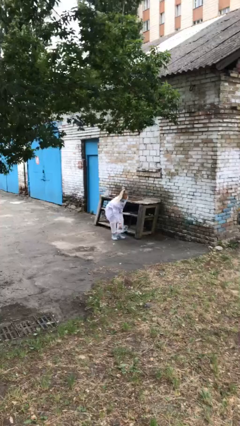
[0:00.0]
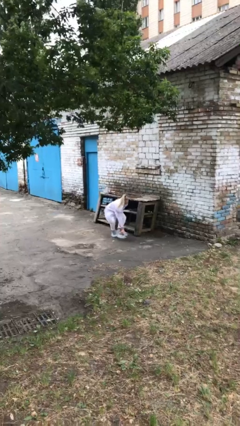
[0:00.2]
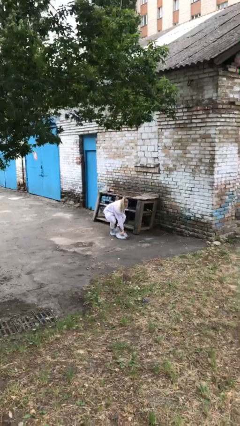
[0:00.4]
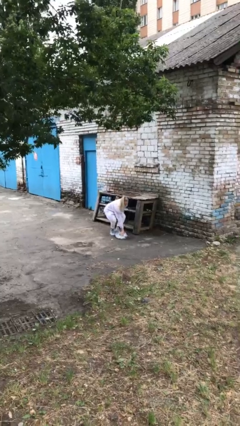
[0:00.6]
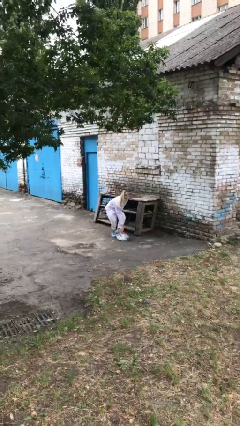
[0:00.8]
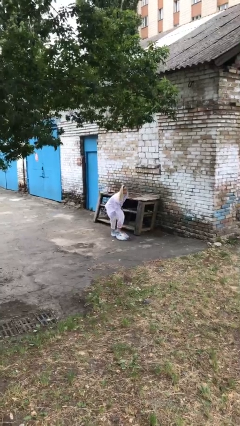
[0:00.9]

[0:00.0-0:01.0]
person puts down object on floor

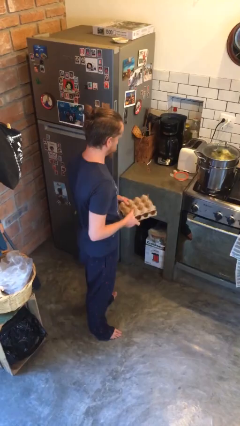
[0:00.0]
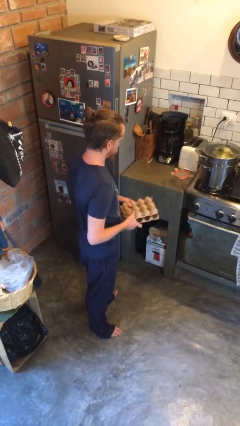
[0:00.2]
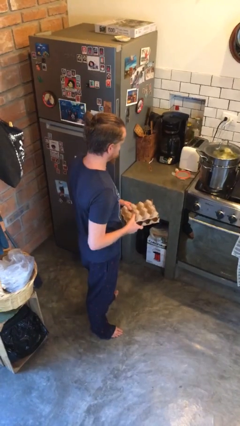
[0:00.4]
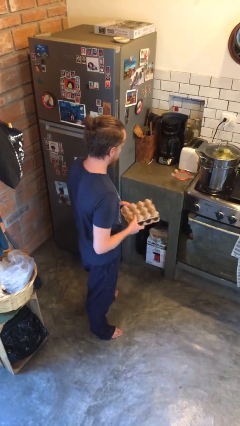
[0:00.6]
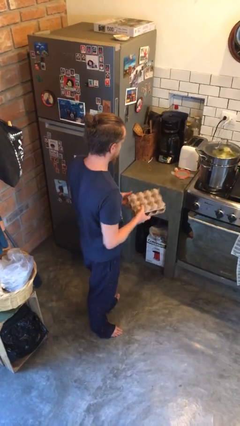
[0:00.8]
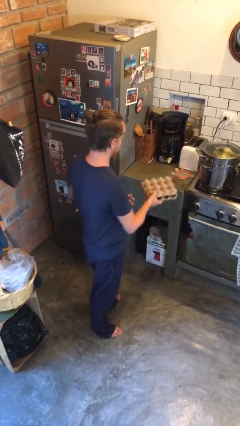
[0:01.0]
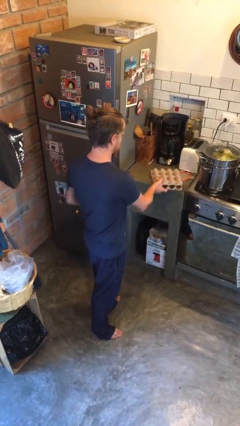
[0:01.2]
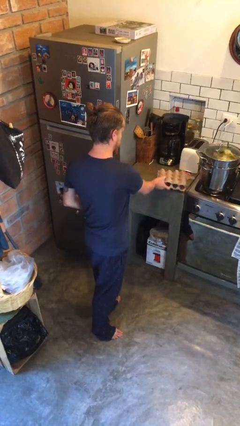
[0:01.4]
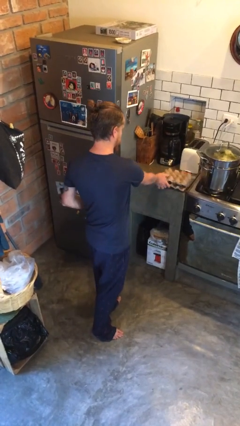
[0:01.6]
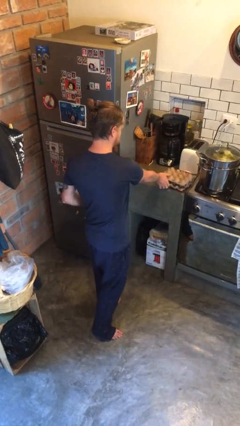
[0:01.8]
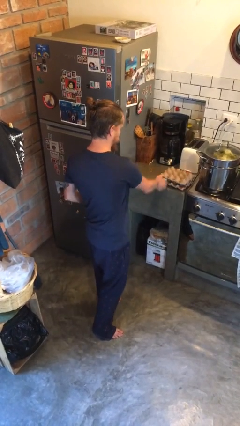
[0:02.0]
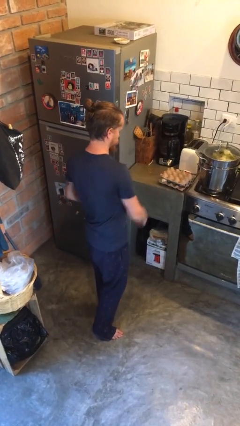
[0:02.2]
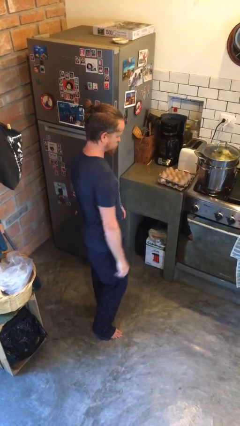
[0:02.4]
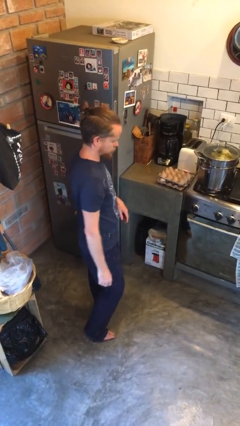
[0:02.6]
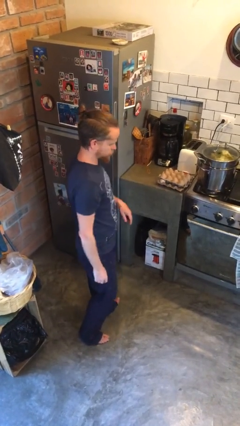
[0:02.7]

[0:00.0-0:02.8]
person puts down object on countertop

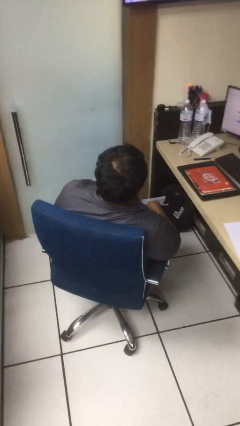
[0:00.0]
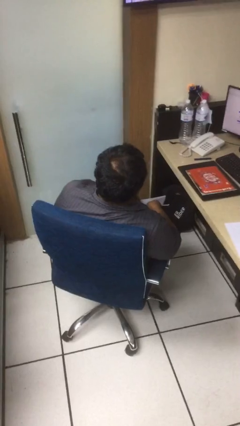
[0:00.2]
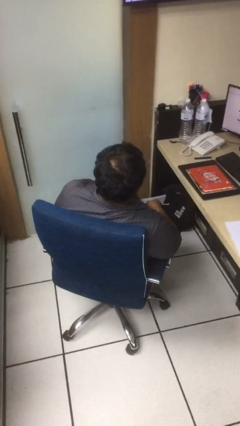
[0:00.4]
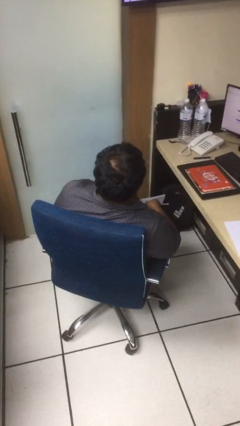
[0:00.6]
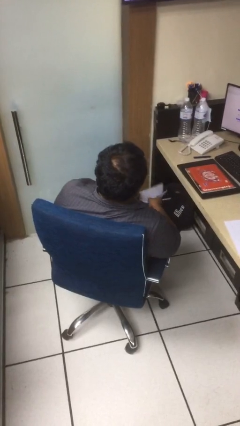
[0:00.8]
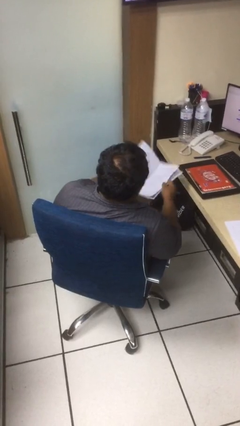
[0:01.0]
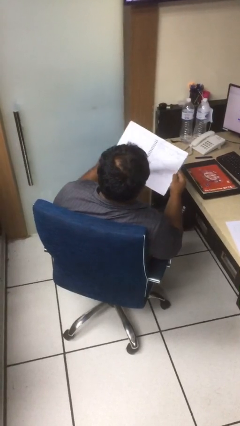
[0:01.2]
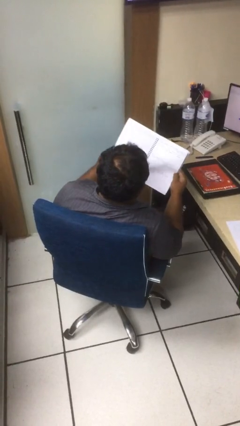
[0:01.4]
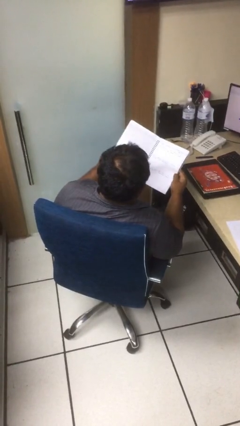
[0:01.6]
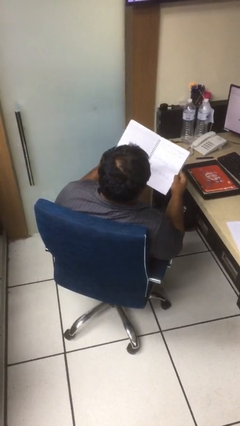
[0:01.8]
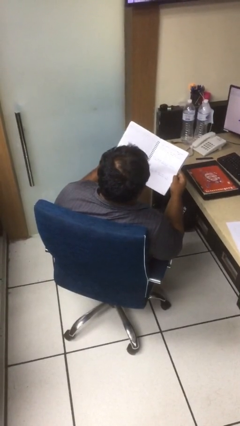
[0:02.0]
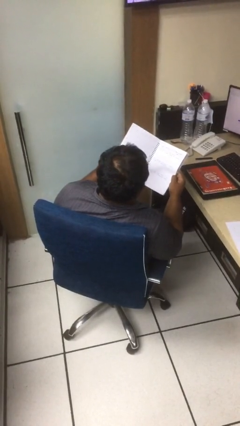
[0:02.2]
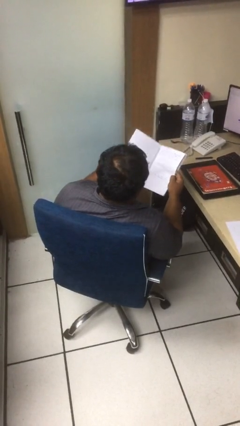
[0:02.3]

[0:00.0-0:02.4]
person reads book

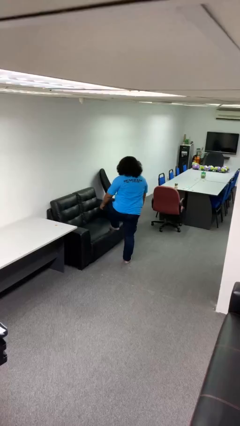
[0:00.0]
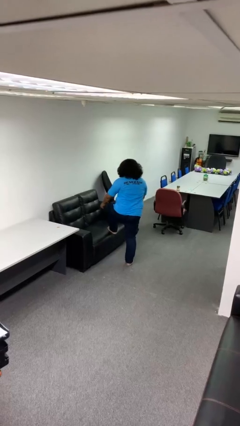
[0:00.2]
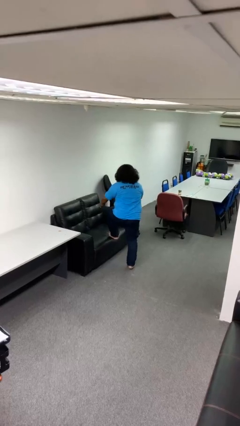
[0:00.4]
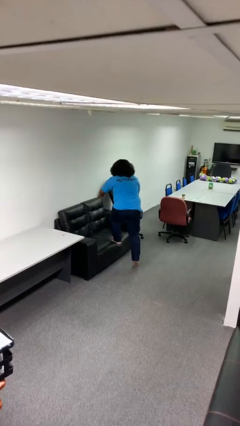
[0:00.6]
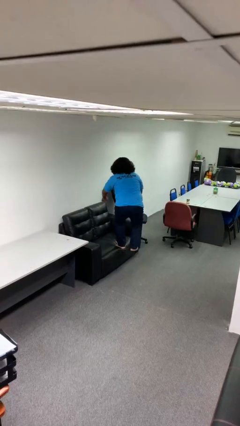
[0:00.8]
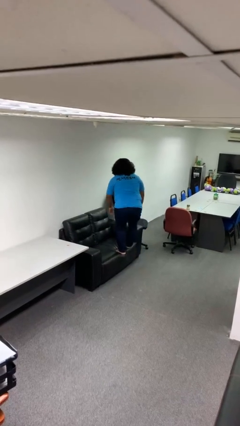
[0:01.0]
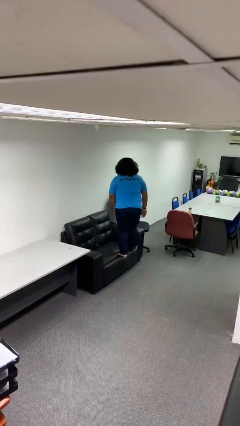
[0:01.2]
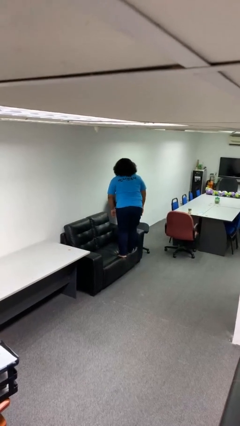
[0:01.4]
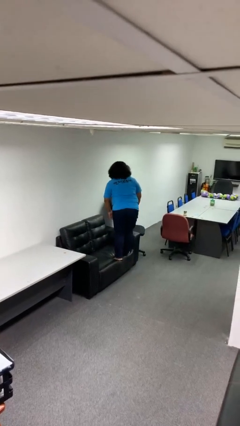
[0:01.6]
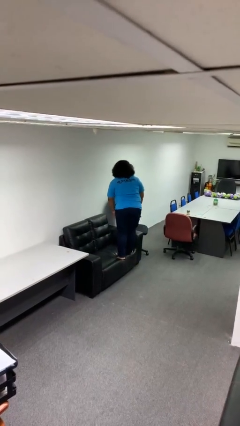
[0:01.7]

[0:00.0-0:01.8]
person climbs on couch

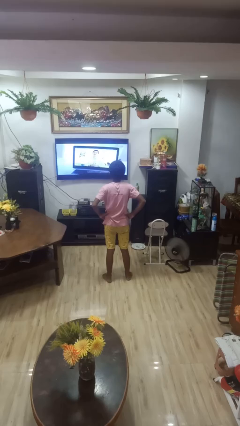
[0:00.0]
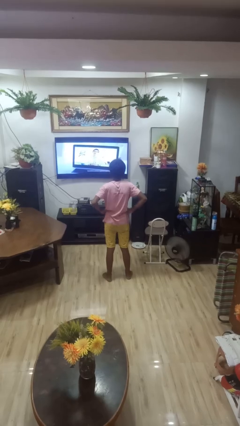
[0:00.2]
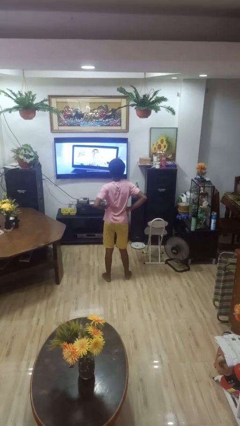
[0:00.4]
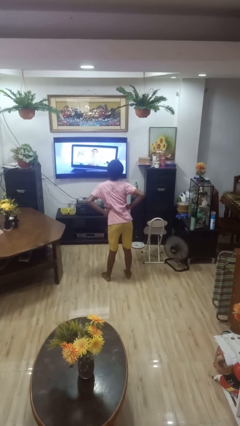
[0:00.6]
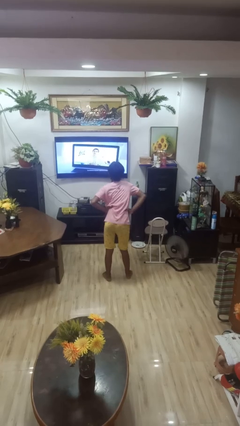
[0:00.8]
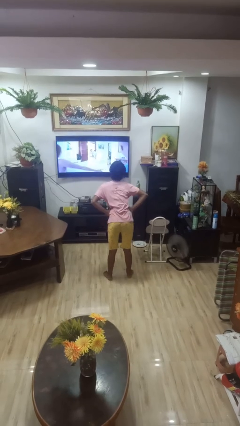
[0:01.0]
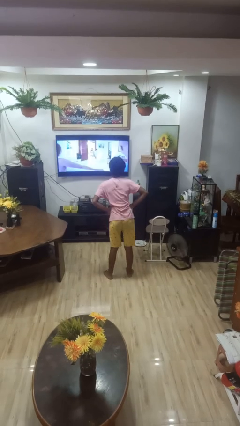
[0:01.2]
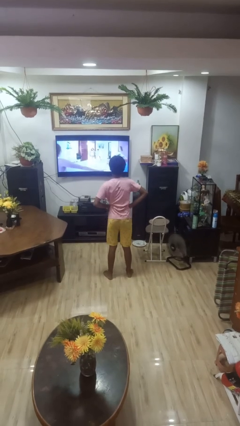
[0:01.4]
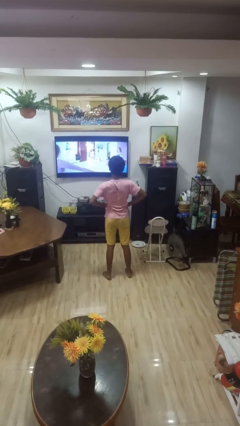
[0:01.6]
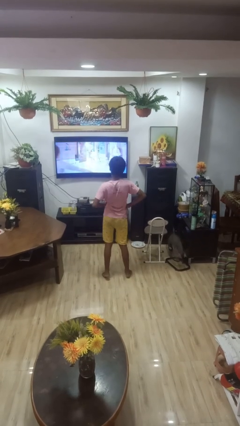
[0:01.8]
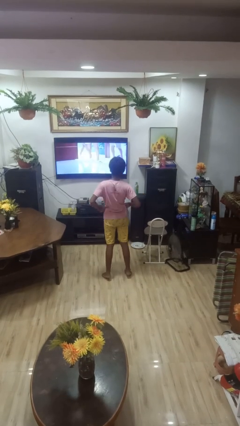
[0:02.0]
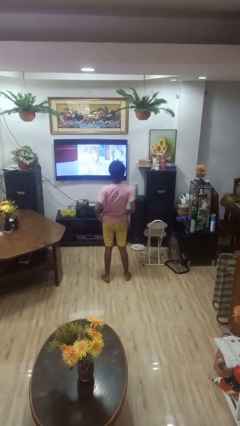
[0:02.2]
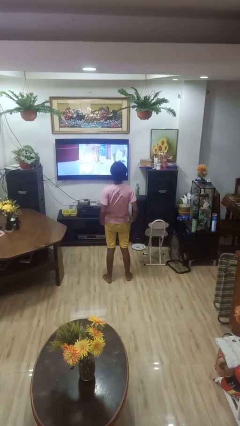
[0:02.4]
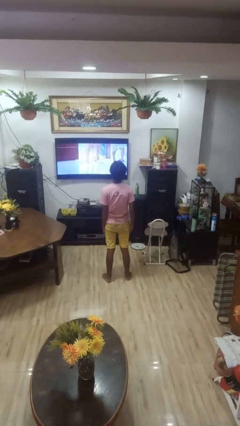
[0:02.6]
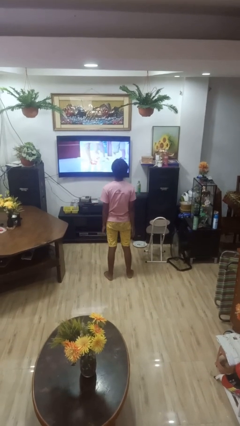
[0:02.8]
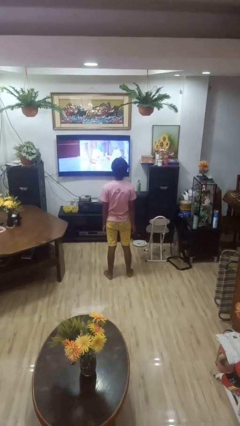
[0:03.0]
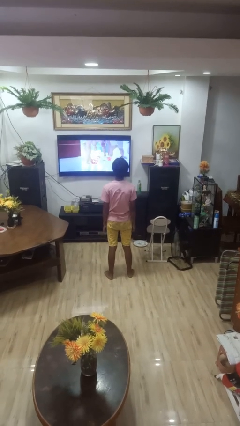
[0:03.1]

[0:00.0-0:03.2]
person wiggles hips

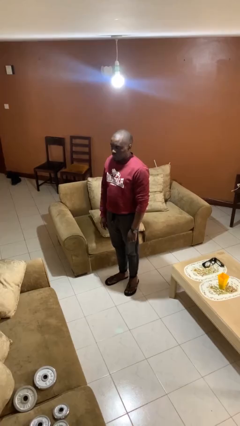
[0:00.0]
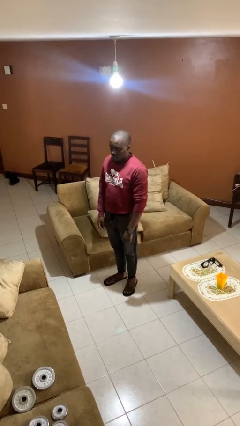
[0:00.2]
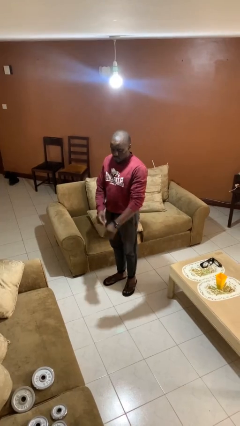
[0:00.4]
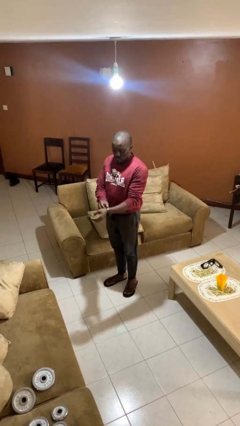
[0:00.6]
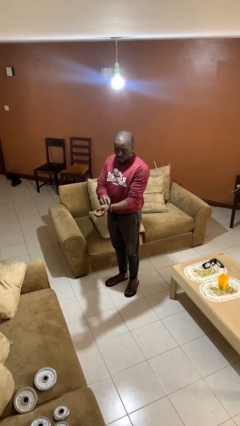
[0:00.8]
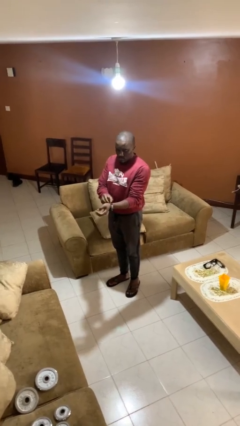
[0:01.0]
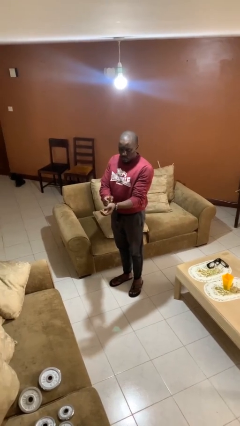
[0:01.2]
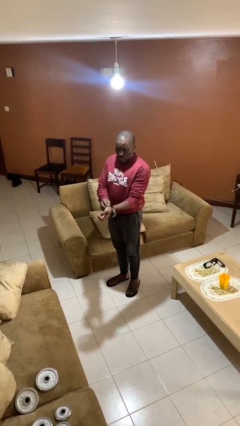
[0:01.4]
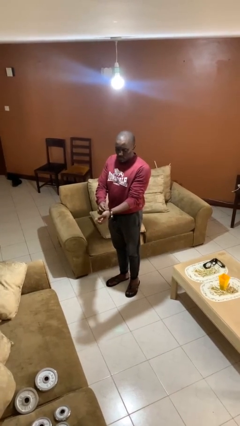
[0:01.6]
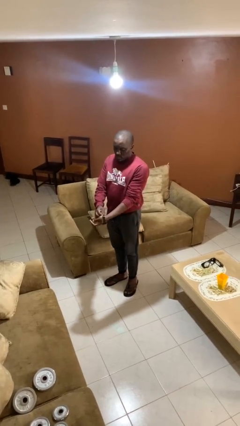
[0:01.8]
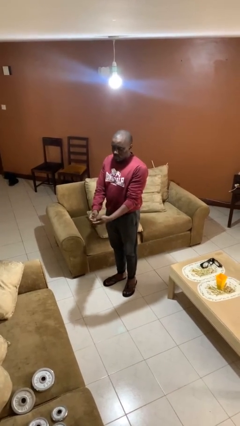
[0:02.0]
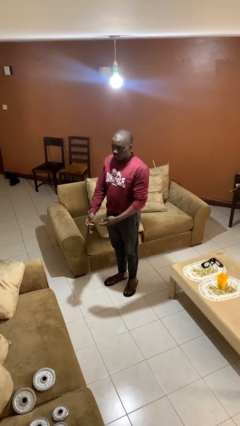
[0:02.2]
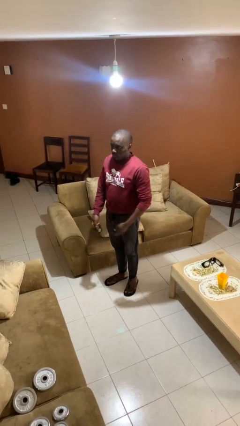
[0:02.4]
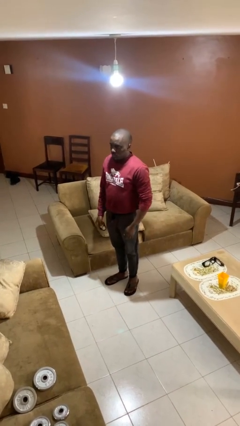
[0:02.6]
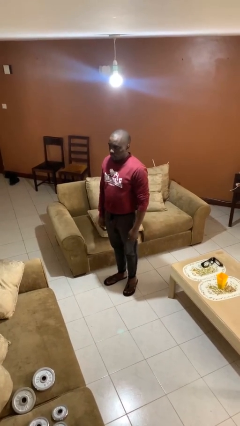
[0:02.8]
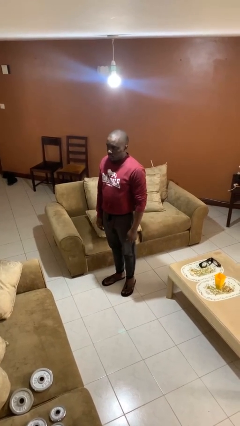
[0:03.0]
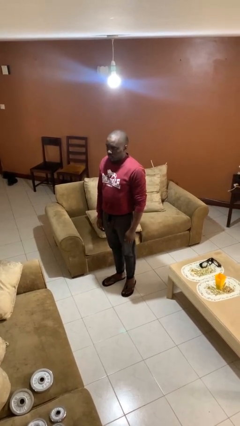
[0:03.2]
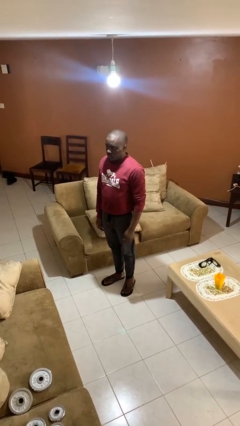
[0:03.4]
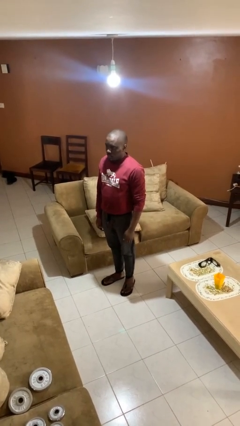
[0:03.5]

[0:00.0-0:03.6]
person takes off wristwatch

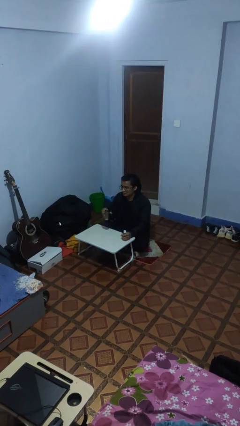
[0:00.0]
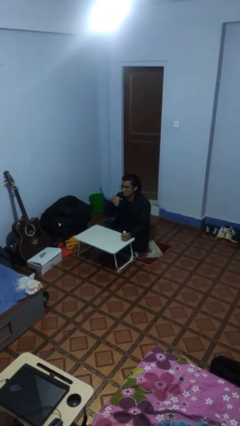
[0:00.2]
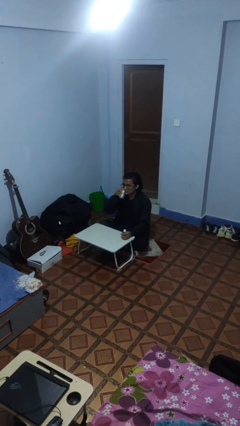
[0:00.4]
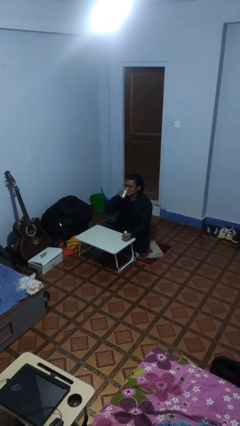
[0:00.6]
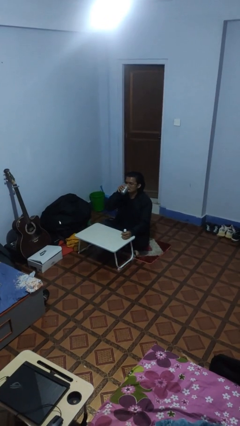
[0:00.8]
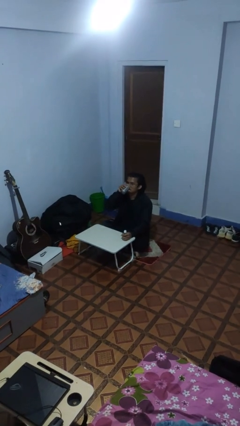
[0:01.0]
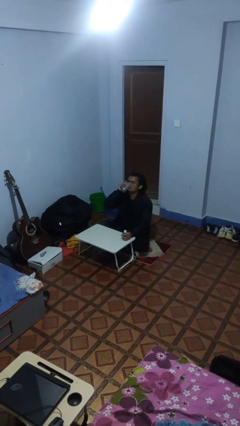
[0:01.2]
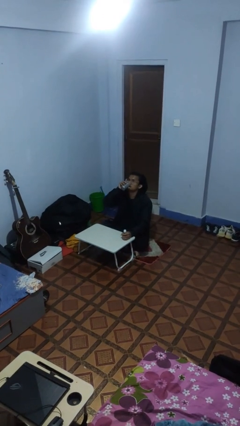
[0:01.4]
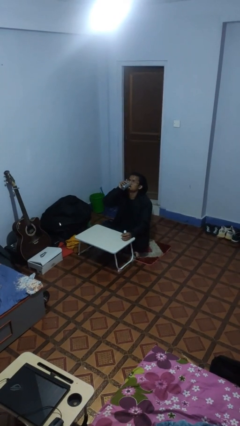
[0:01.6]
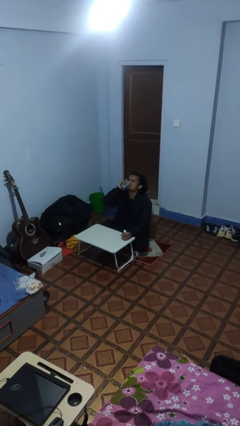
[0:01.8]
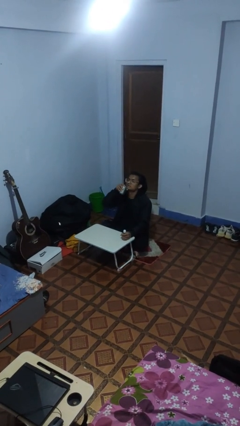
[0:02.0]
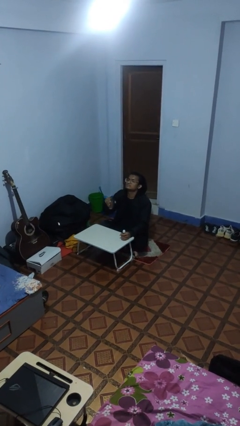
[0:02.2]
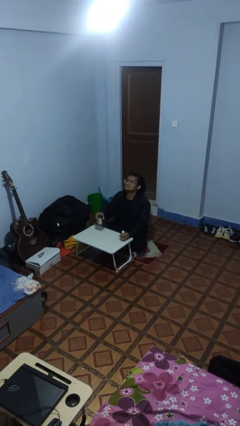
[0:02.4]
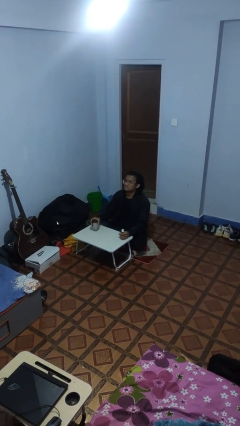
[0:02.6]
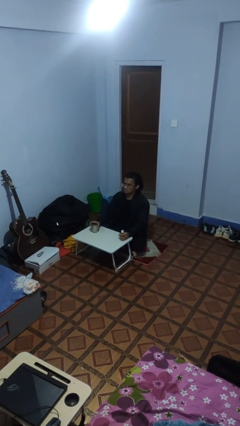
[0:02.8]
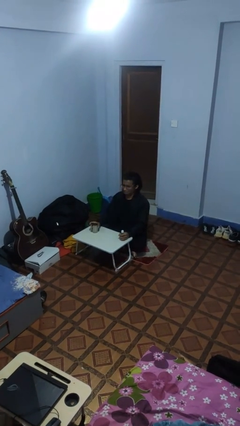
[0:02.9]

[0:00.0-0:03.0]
person drinks from cup
